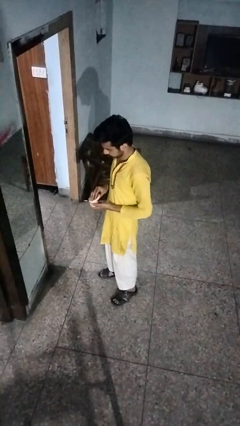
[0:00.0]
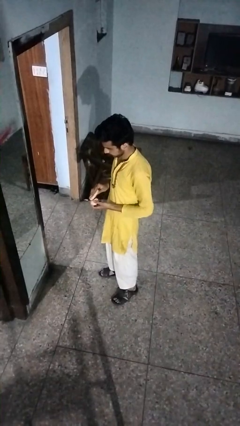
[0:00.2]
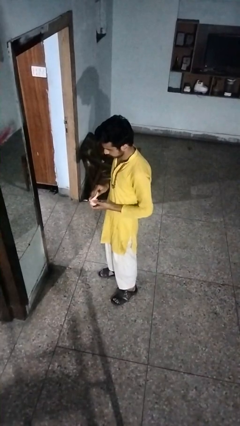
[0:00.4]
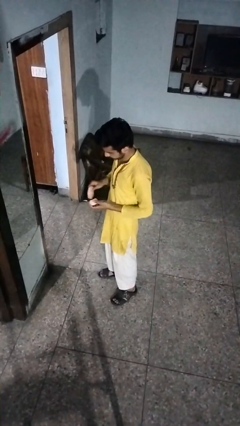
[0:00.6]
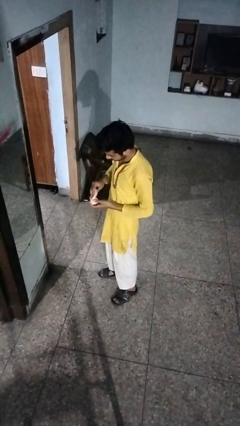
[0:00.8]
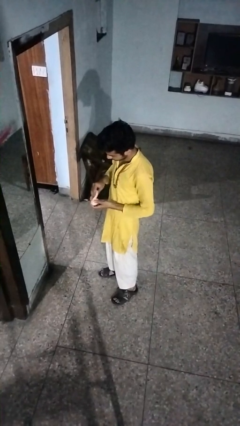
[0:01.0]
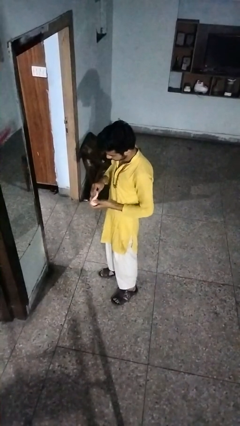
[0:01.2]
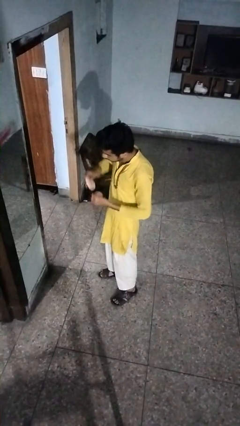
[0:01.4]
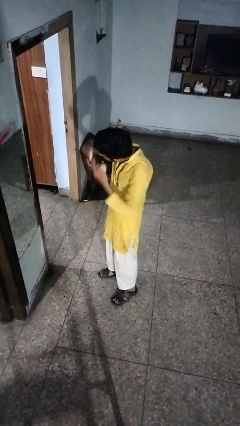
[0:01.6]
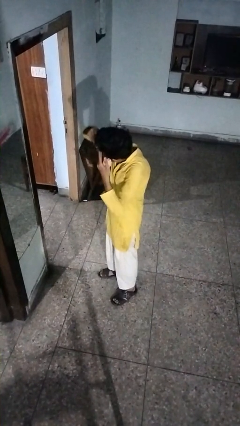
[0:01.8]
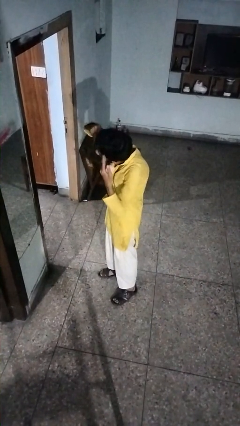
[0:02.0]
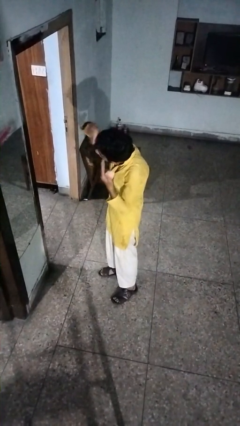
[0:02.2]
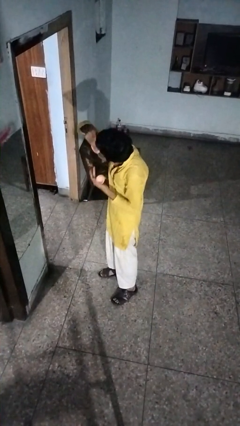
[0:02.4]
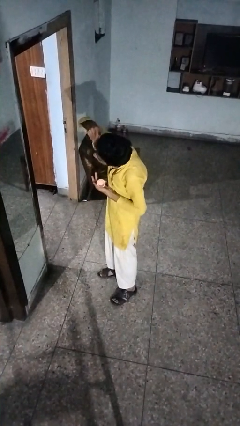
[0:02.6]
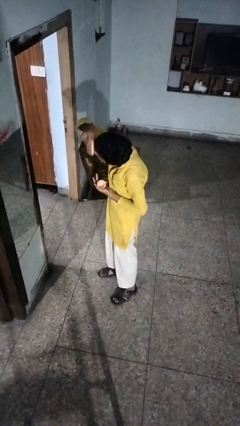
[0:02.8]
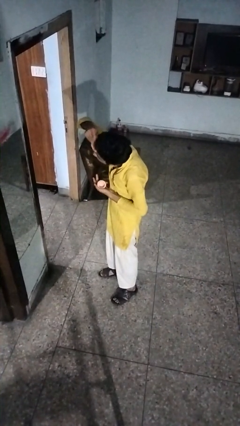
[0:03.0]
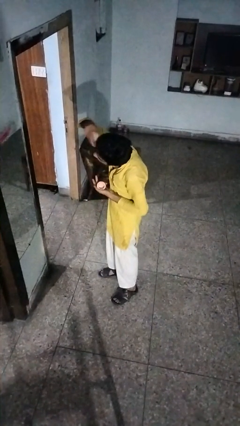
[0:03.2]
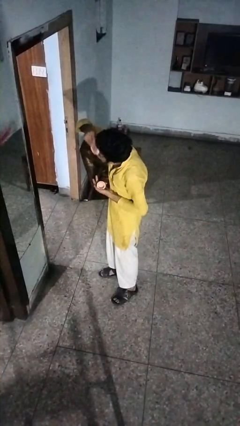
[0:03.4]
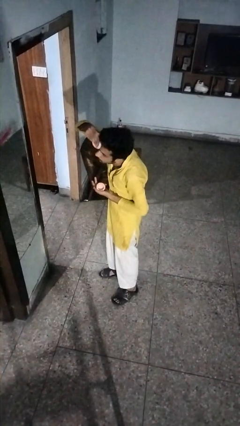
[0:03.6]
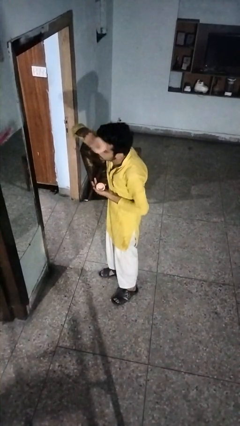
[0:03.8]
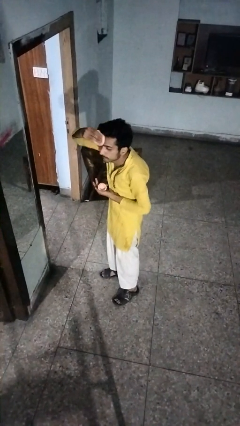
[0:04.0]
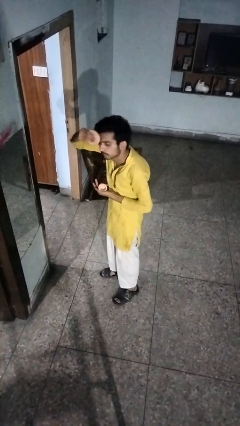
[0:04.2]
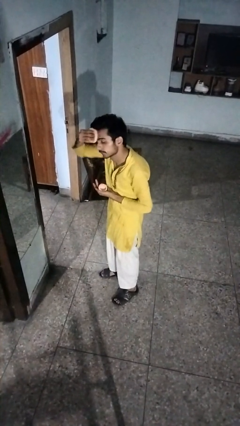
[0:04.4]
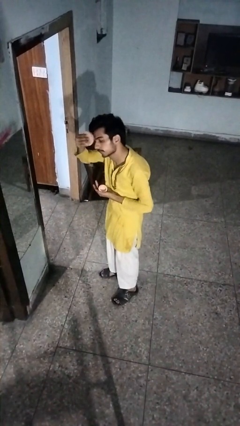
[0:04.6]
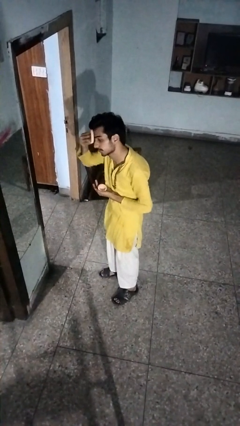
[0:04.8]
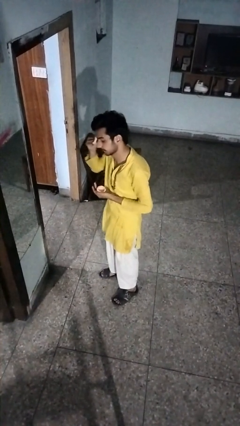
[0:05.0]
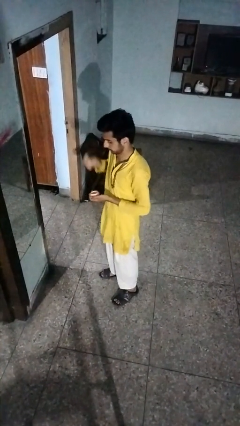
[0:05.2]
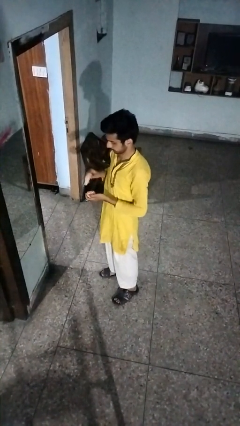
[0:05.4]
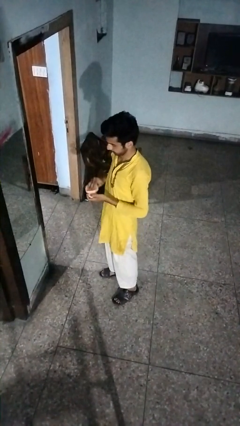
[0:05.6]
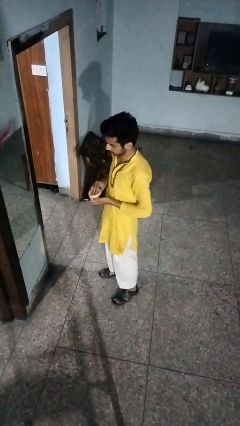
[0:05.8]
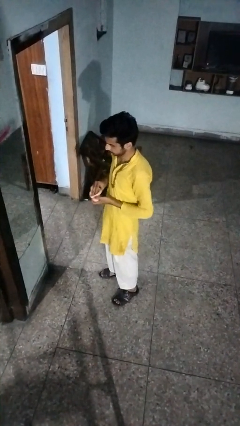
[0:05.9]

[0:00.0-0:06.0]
person applies foundation makeup

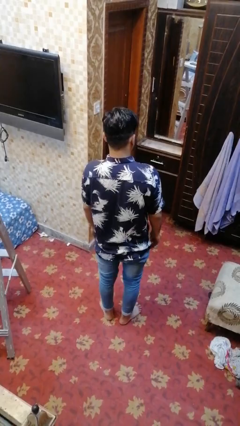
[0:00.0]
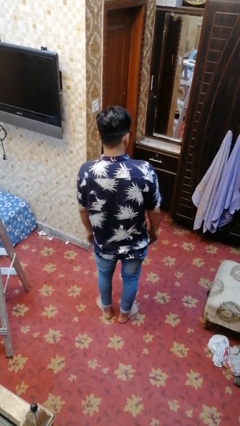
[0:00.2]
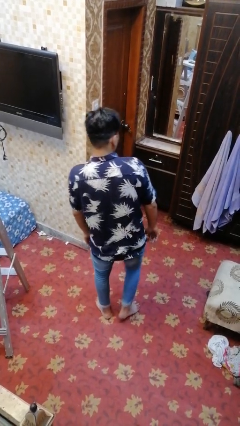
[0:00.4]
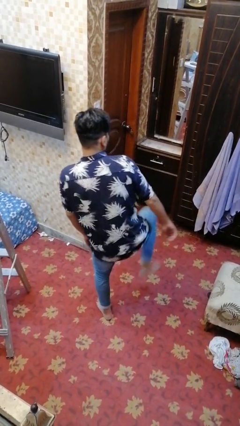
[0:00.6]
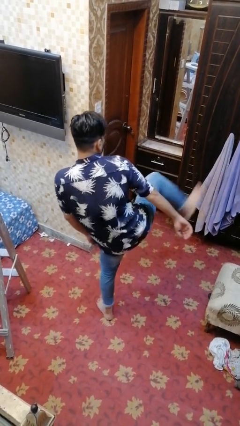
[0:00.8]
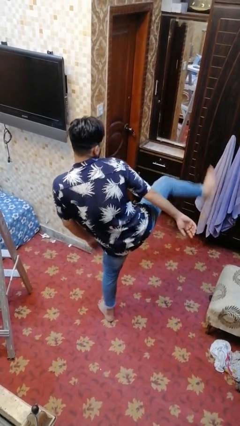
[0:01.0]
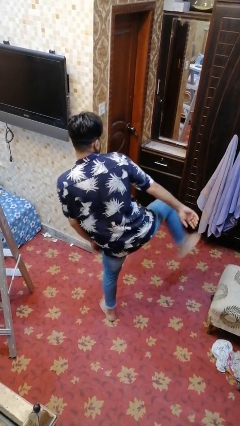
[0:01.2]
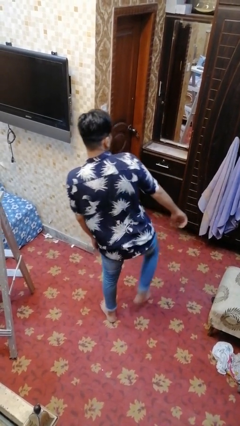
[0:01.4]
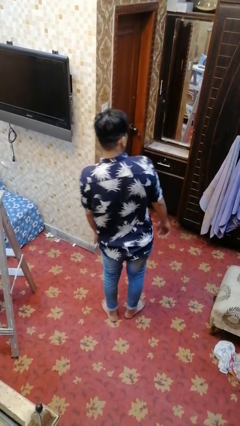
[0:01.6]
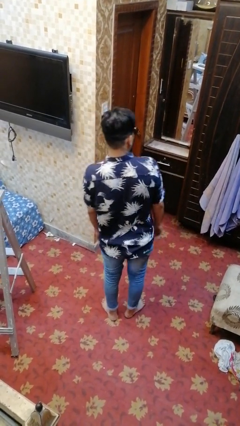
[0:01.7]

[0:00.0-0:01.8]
person karate kicks

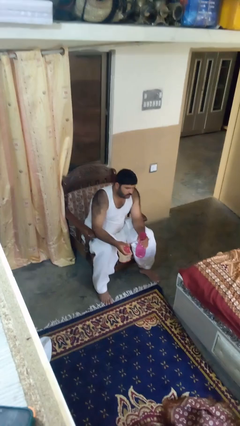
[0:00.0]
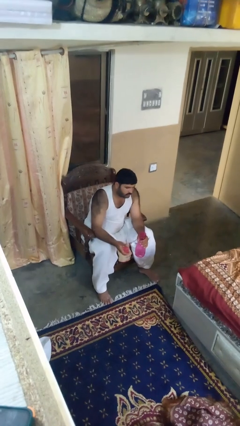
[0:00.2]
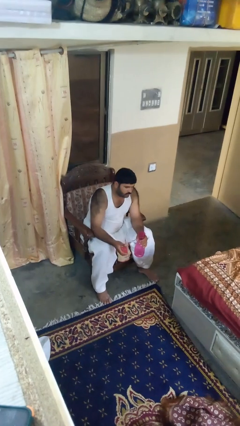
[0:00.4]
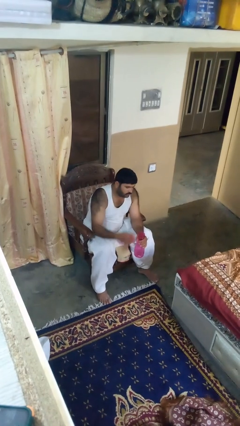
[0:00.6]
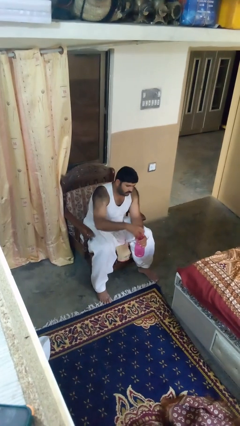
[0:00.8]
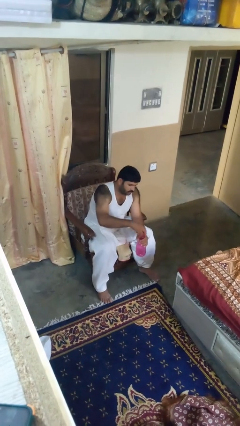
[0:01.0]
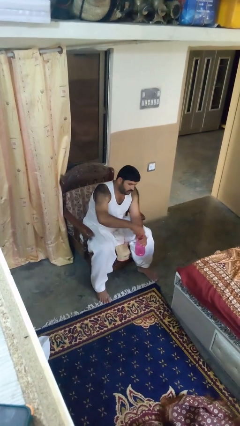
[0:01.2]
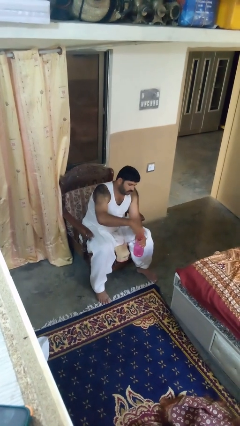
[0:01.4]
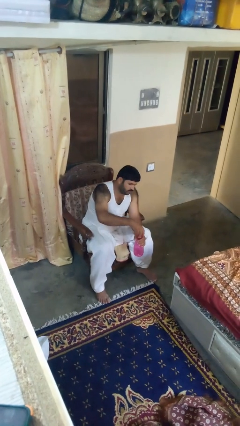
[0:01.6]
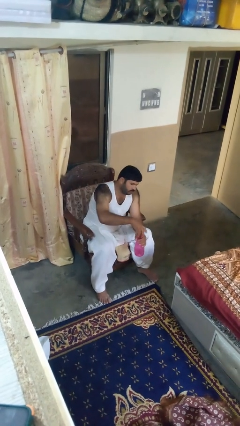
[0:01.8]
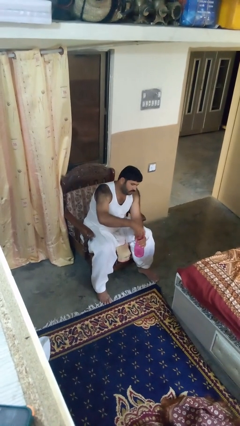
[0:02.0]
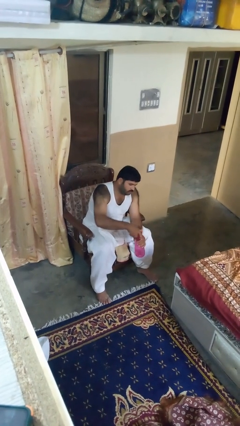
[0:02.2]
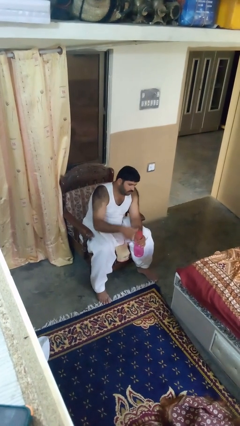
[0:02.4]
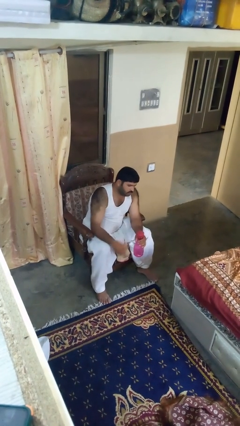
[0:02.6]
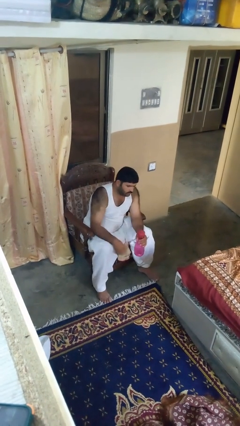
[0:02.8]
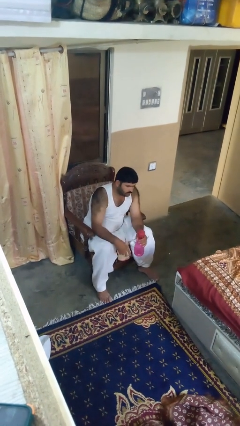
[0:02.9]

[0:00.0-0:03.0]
person screws lid to bottle

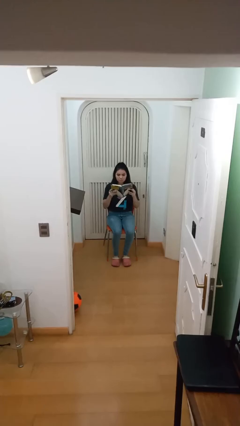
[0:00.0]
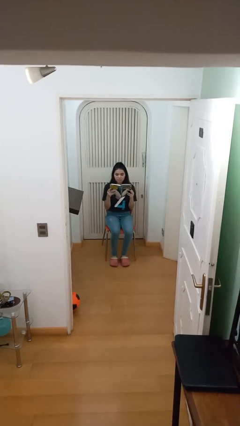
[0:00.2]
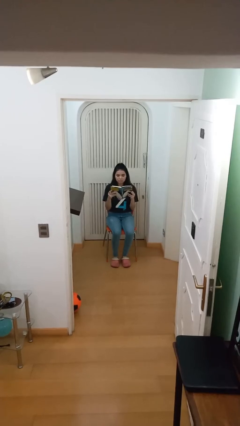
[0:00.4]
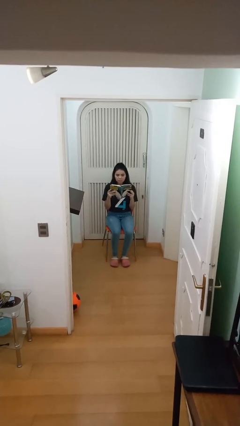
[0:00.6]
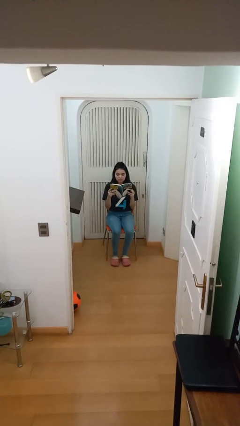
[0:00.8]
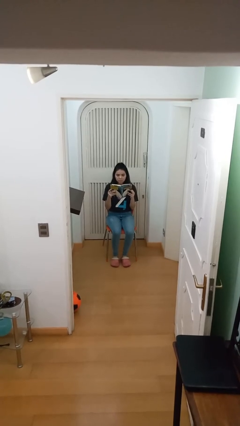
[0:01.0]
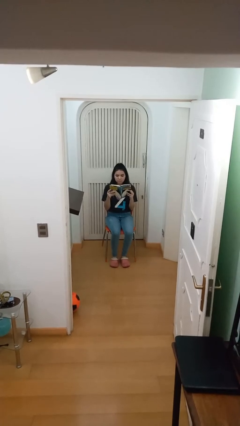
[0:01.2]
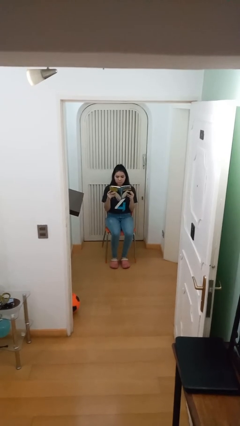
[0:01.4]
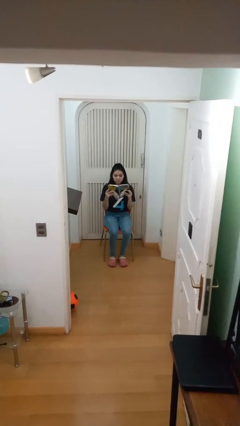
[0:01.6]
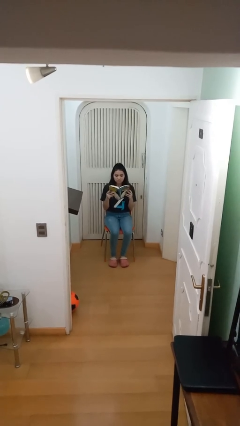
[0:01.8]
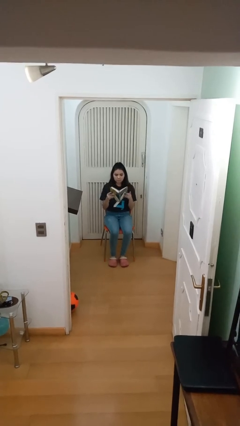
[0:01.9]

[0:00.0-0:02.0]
person reads document

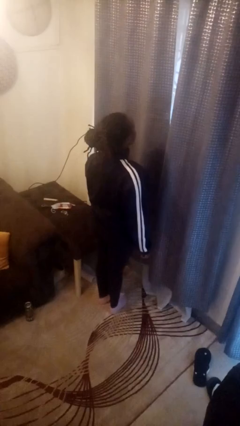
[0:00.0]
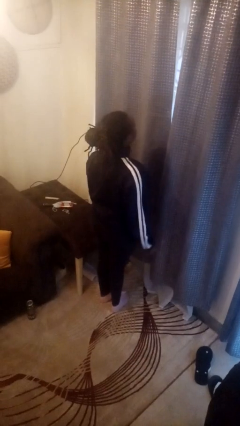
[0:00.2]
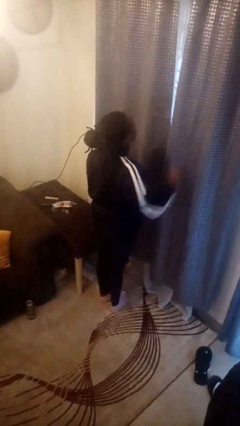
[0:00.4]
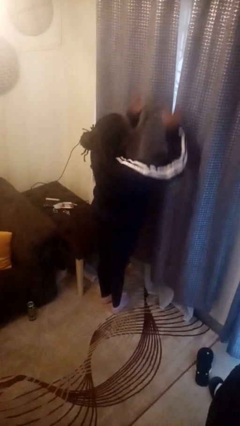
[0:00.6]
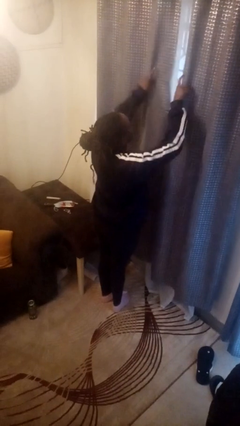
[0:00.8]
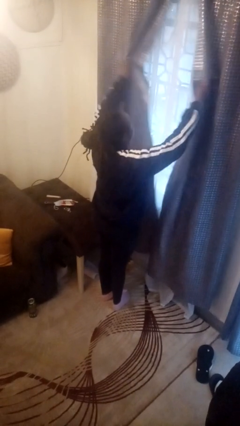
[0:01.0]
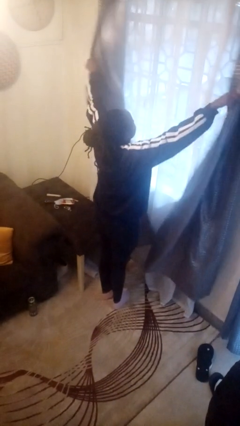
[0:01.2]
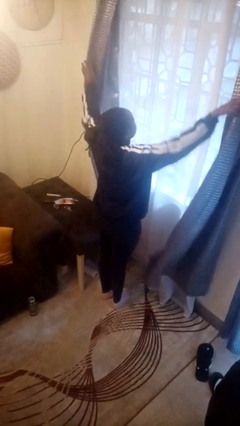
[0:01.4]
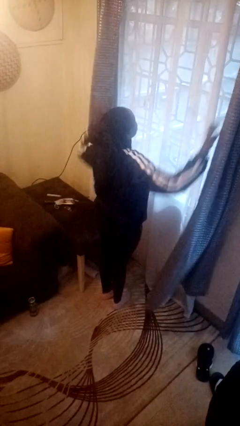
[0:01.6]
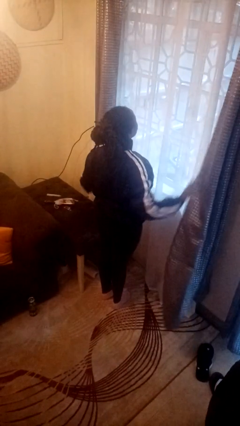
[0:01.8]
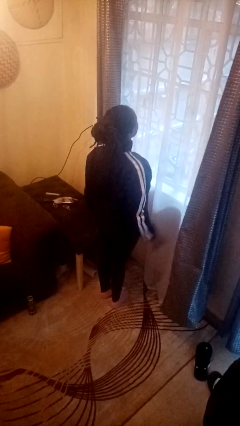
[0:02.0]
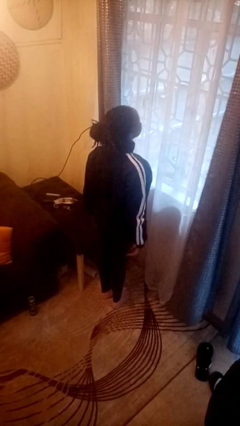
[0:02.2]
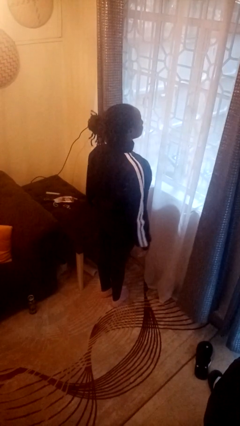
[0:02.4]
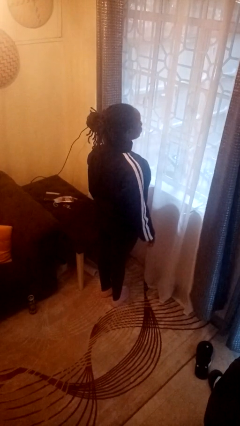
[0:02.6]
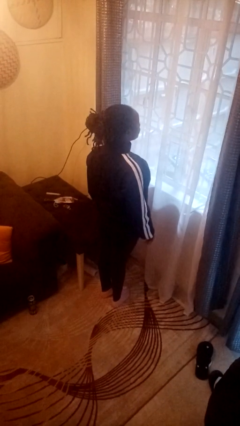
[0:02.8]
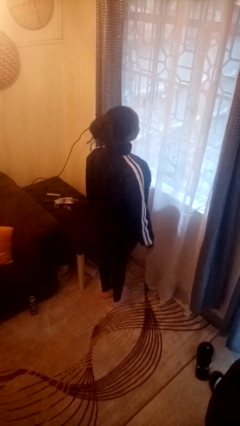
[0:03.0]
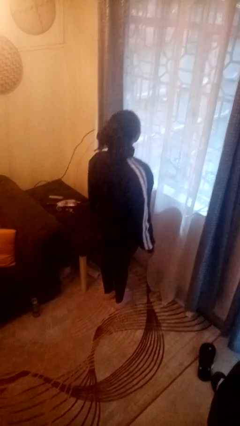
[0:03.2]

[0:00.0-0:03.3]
person opens curtains

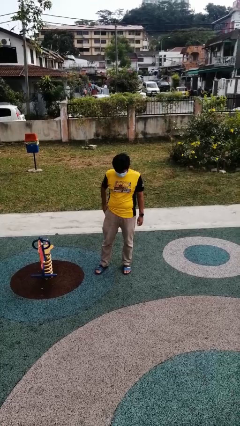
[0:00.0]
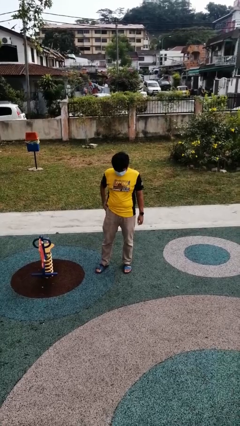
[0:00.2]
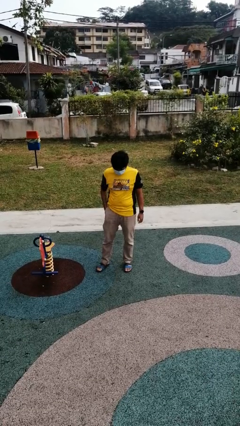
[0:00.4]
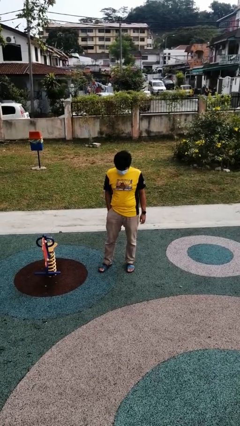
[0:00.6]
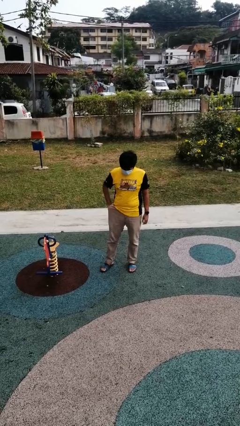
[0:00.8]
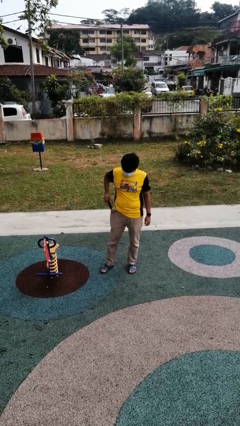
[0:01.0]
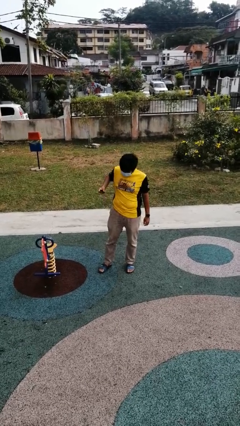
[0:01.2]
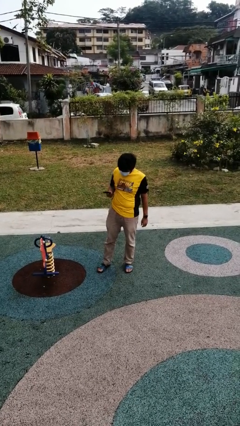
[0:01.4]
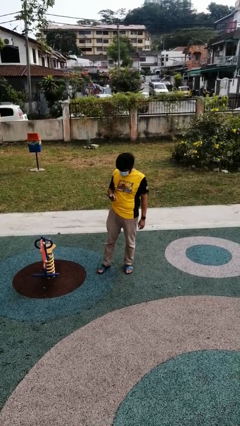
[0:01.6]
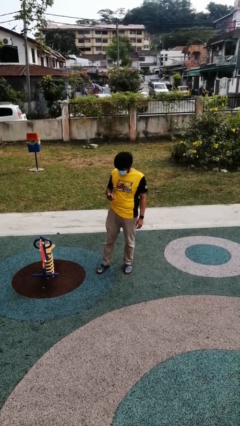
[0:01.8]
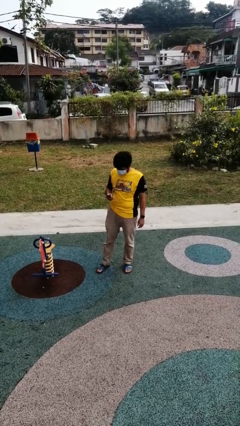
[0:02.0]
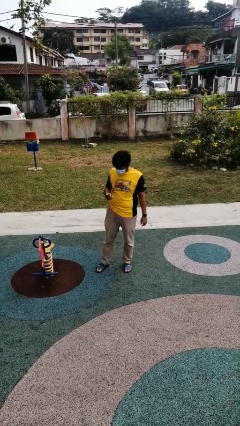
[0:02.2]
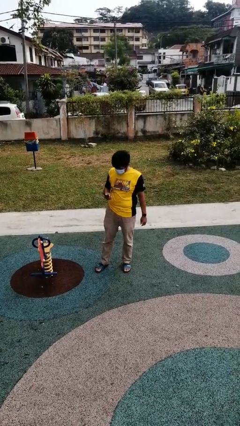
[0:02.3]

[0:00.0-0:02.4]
person takes phone from pocket
